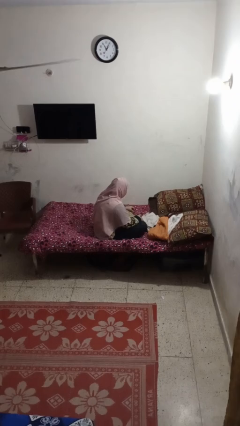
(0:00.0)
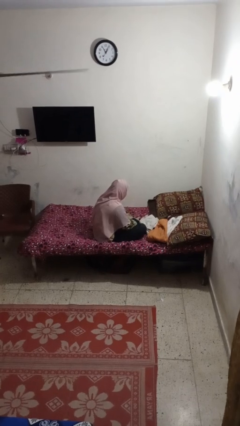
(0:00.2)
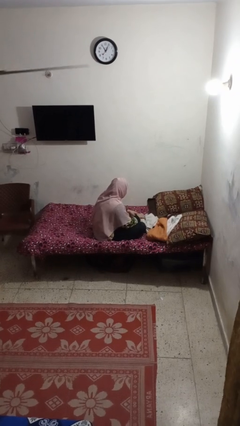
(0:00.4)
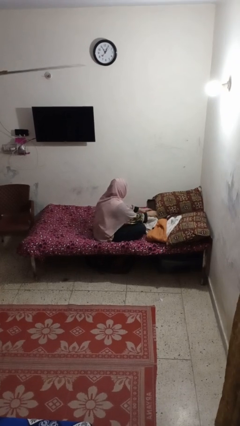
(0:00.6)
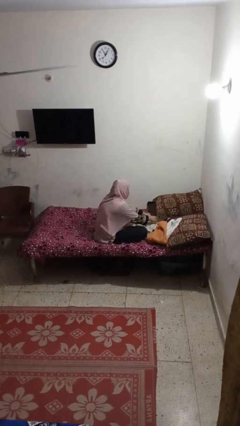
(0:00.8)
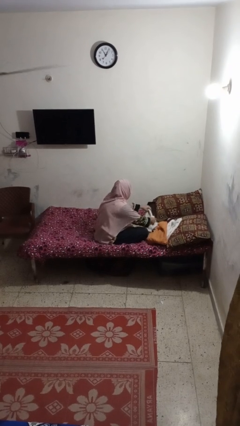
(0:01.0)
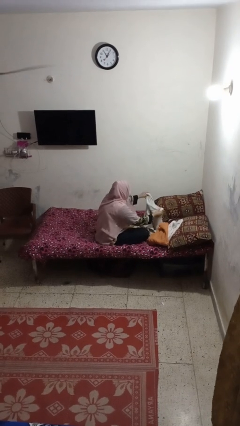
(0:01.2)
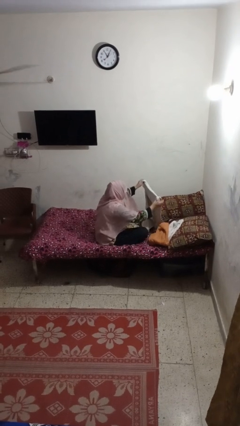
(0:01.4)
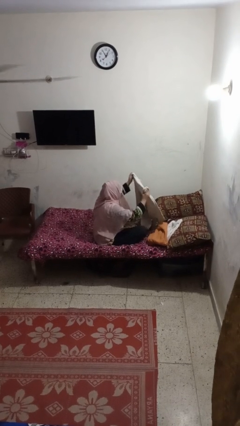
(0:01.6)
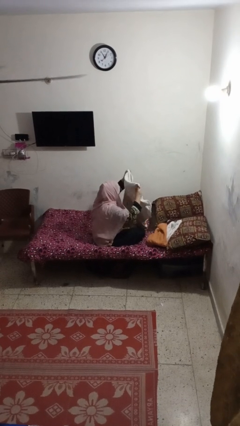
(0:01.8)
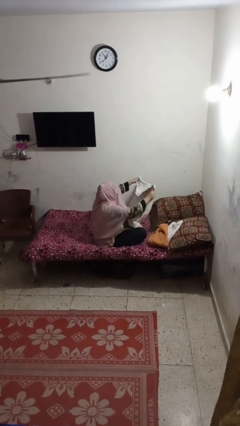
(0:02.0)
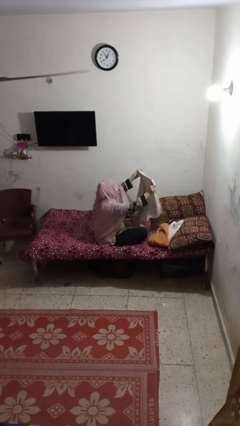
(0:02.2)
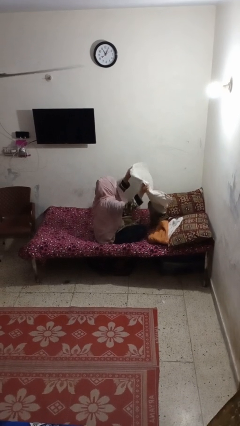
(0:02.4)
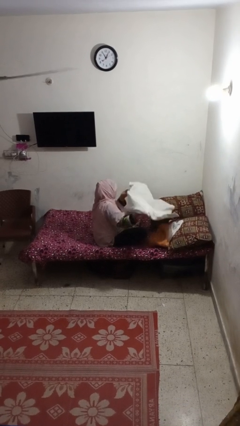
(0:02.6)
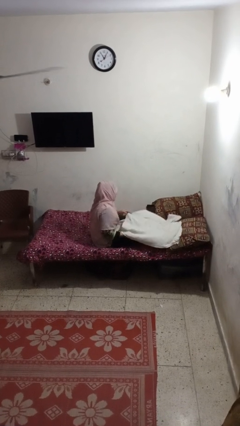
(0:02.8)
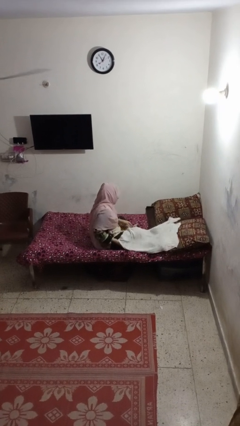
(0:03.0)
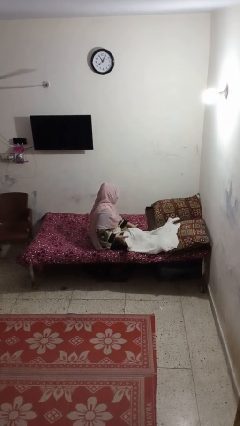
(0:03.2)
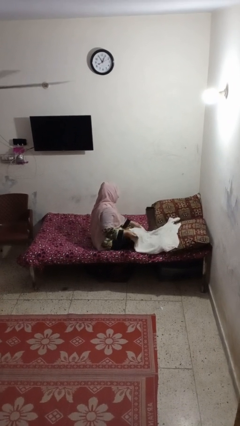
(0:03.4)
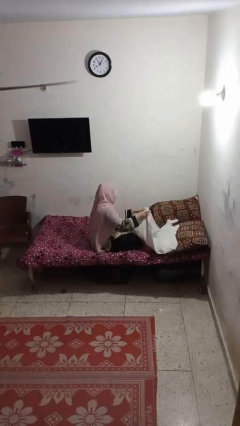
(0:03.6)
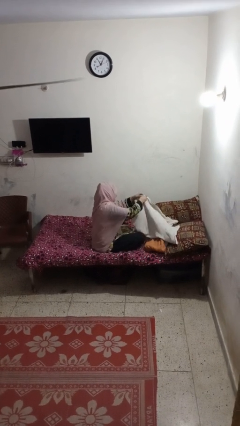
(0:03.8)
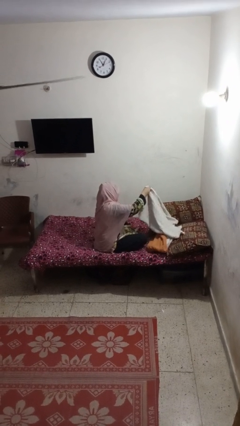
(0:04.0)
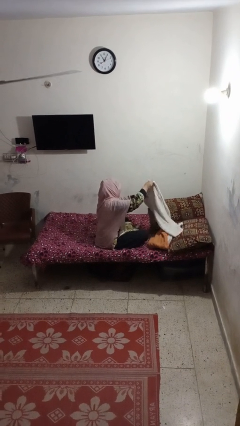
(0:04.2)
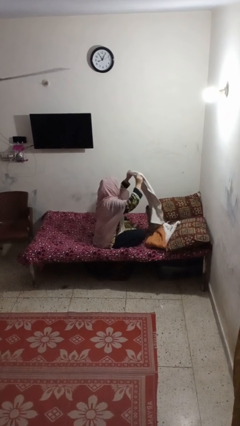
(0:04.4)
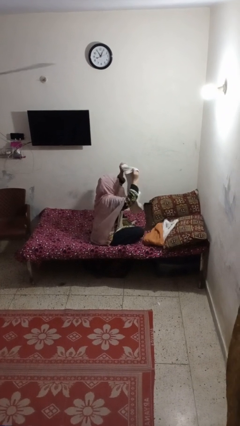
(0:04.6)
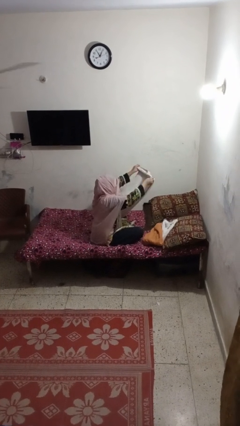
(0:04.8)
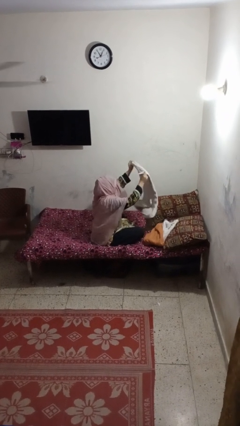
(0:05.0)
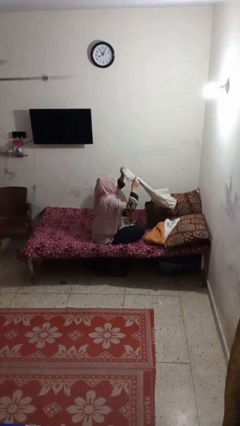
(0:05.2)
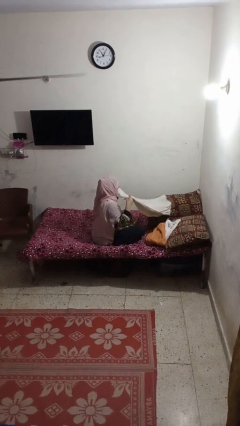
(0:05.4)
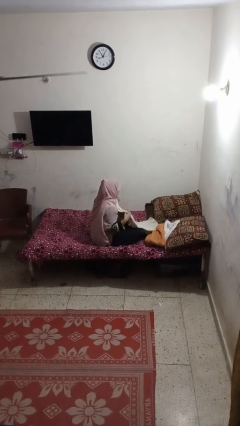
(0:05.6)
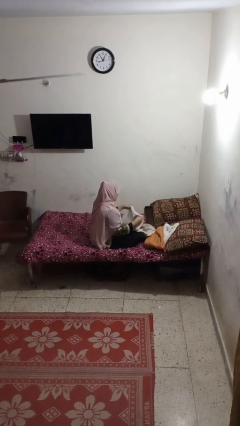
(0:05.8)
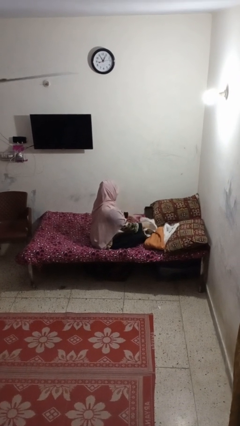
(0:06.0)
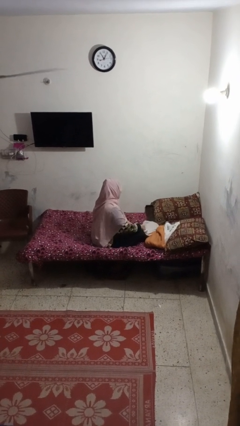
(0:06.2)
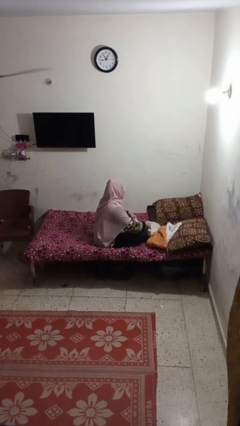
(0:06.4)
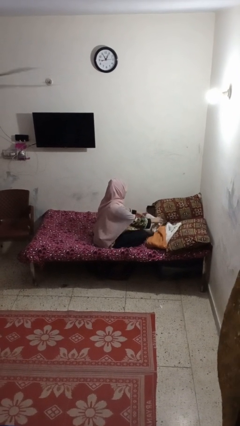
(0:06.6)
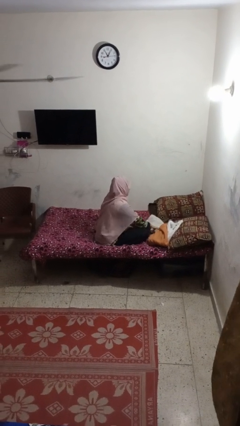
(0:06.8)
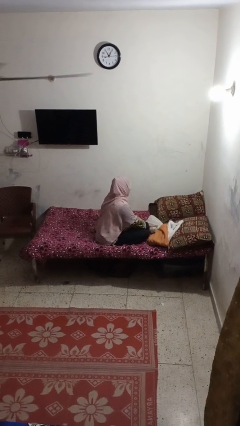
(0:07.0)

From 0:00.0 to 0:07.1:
person folds towel

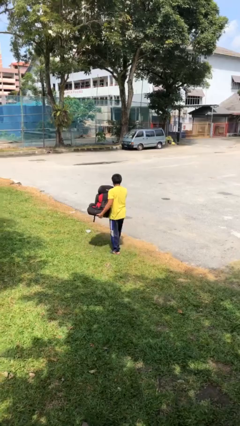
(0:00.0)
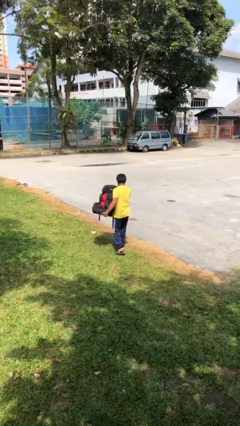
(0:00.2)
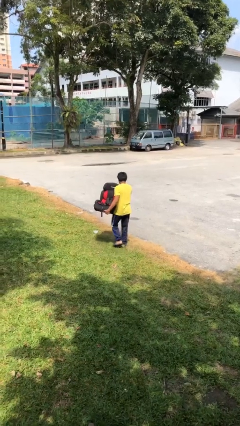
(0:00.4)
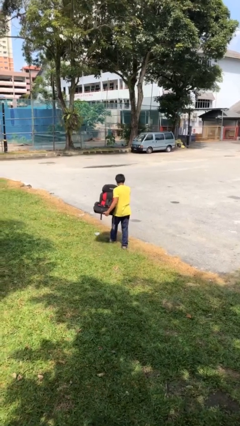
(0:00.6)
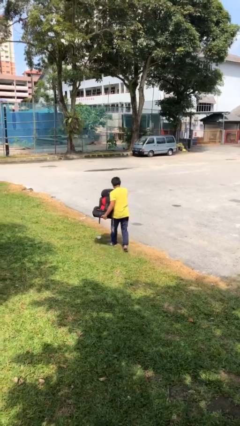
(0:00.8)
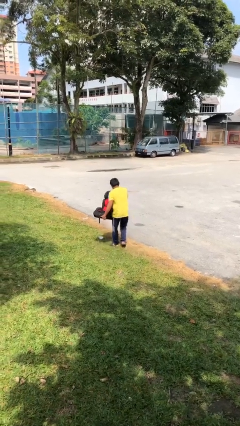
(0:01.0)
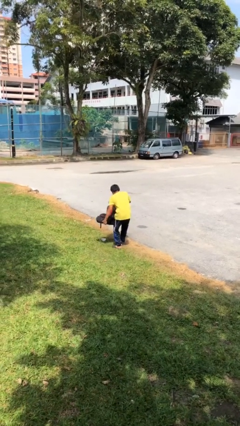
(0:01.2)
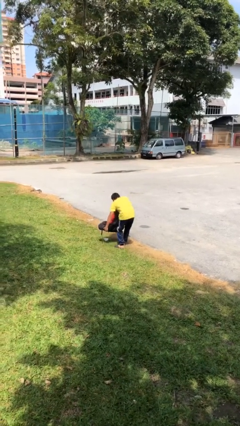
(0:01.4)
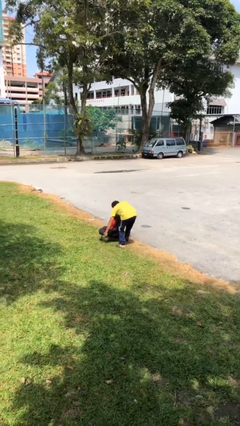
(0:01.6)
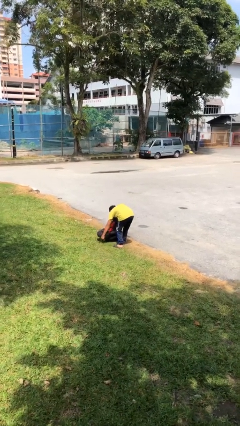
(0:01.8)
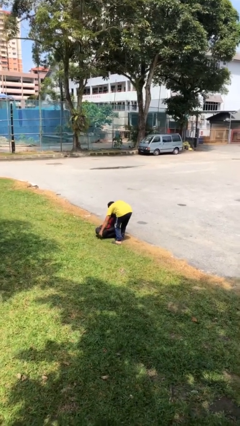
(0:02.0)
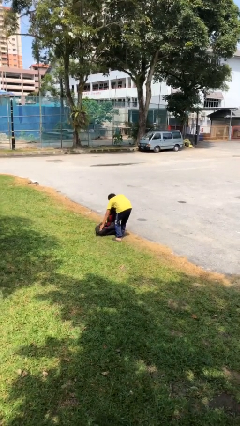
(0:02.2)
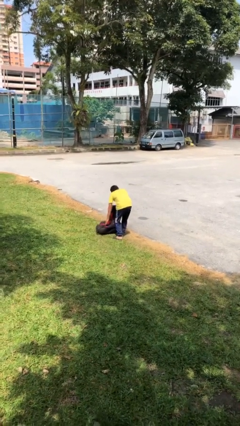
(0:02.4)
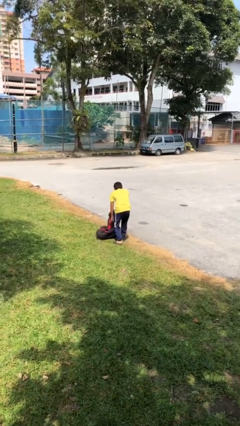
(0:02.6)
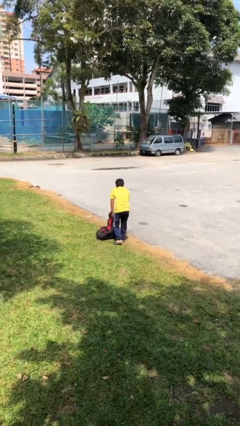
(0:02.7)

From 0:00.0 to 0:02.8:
person puts down object on floor

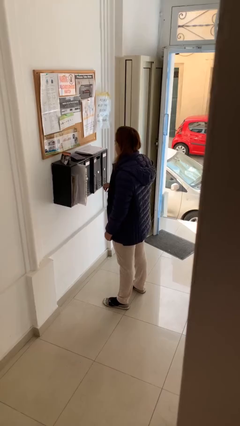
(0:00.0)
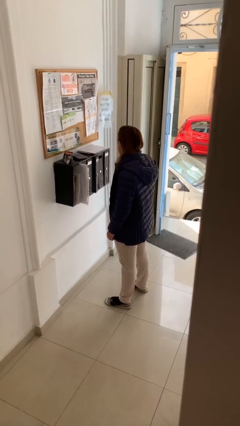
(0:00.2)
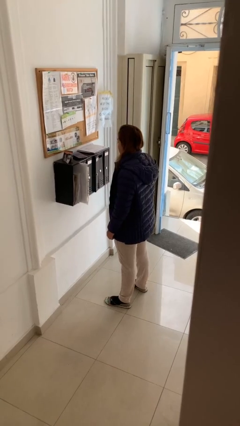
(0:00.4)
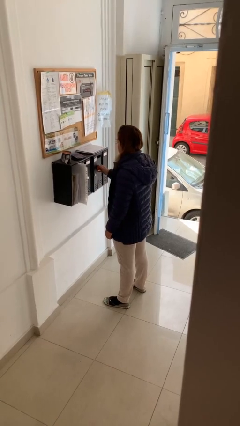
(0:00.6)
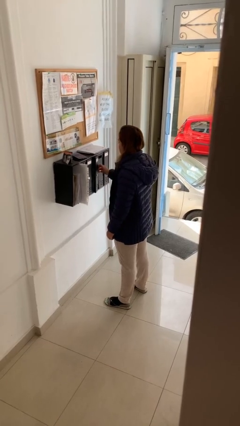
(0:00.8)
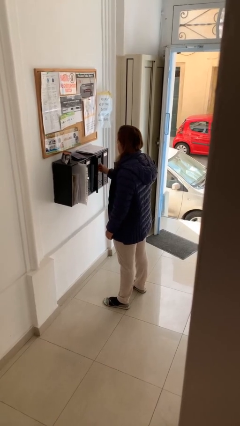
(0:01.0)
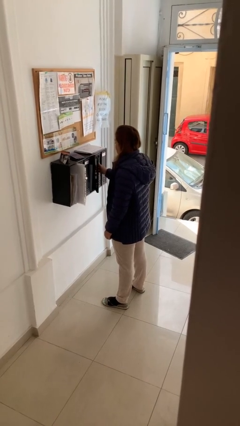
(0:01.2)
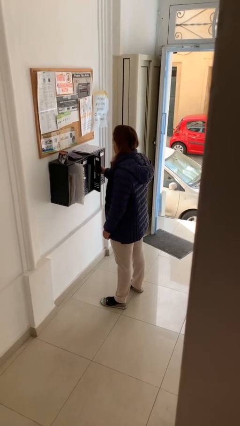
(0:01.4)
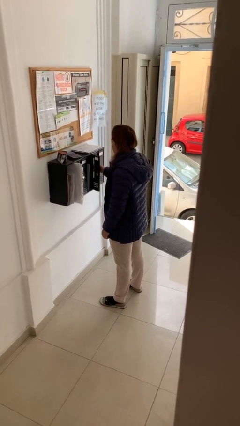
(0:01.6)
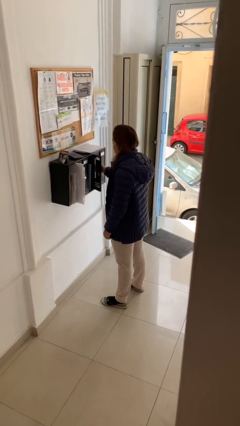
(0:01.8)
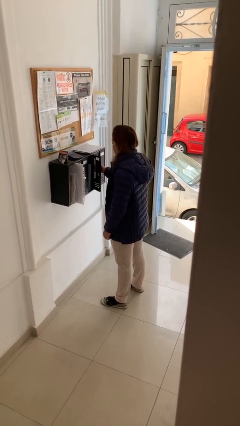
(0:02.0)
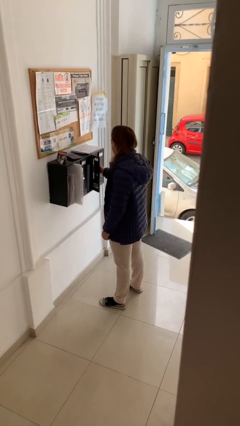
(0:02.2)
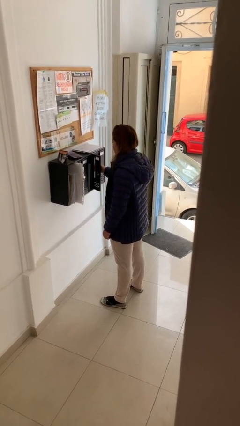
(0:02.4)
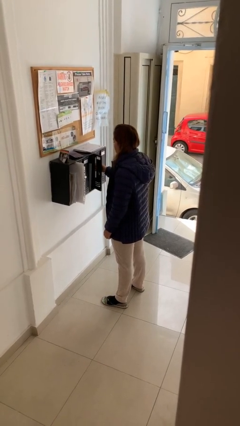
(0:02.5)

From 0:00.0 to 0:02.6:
person opens mailbox

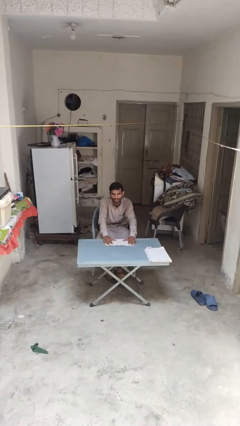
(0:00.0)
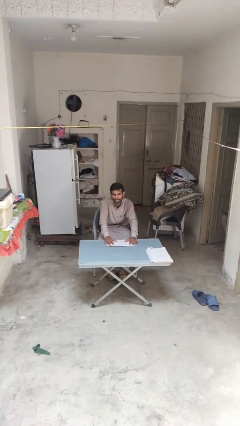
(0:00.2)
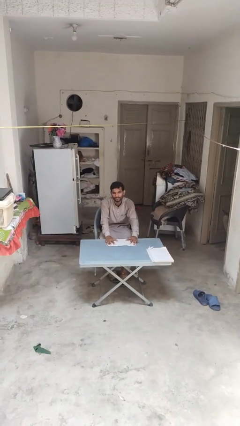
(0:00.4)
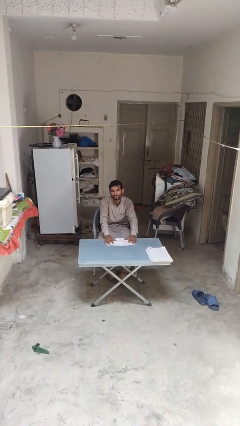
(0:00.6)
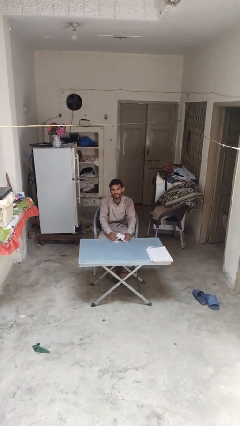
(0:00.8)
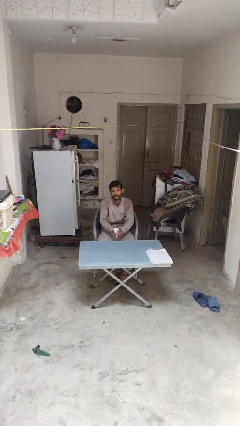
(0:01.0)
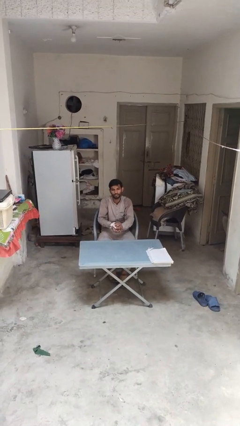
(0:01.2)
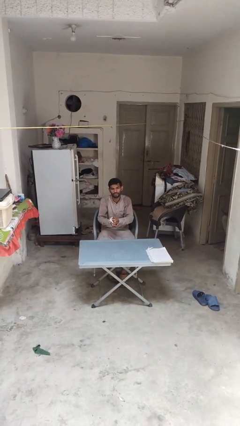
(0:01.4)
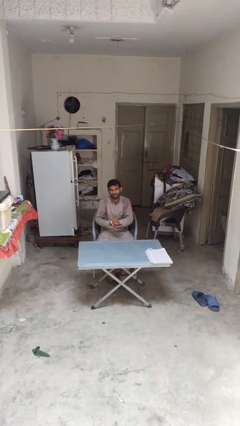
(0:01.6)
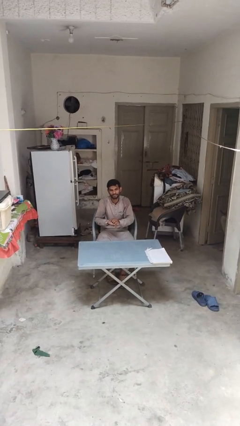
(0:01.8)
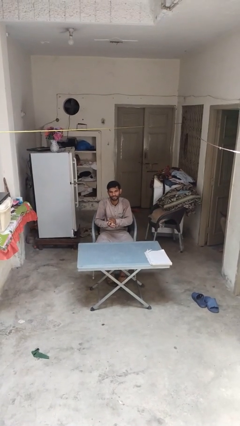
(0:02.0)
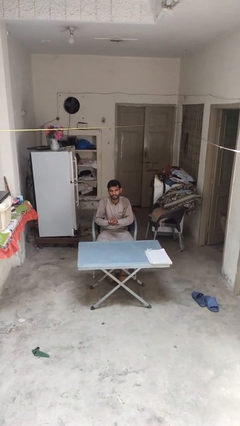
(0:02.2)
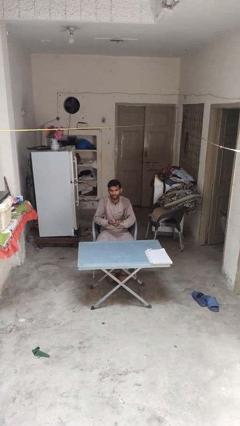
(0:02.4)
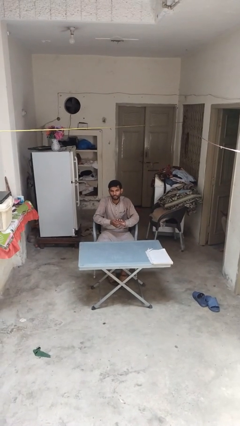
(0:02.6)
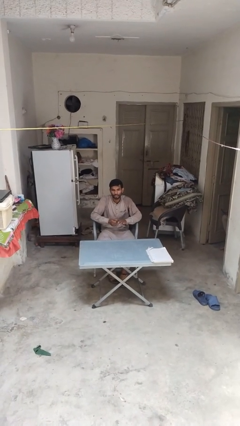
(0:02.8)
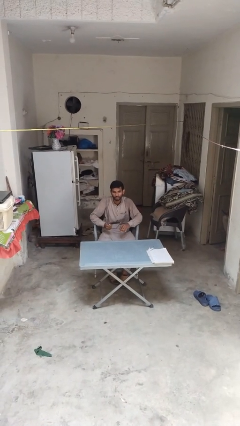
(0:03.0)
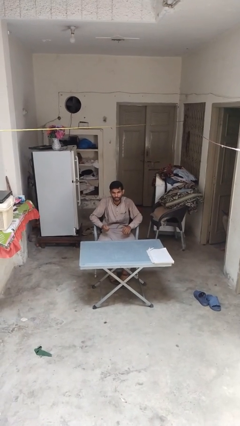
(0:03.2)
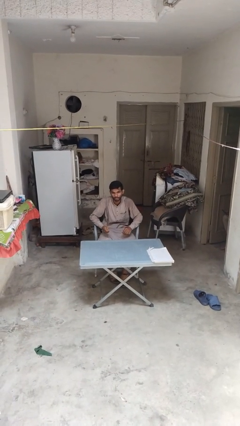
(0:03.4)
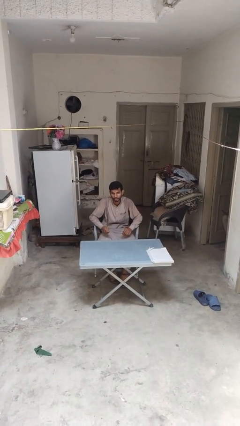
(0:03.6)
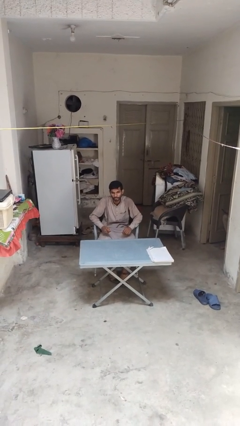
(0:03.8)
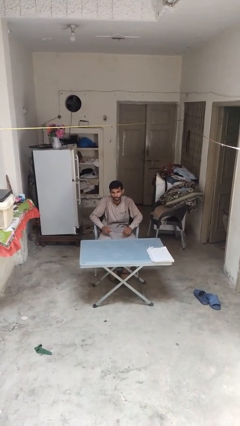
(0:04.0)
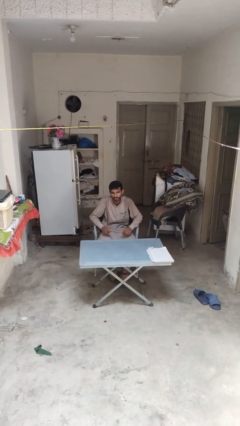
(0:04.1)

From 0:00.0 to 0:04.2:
person crumples paper

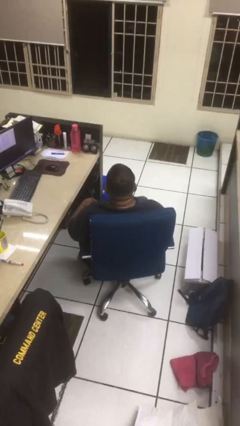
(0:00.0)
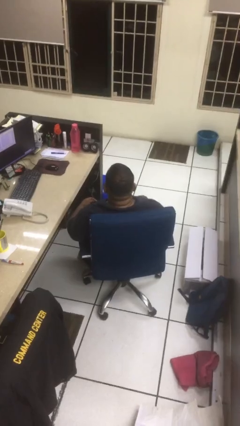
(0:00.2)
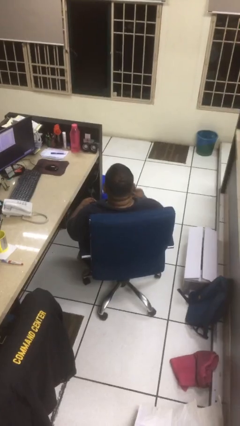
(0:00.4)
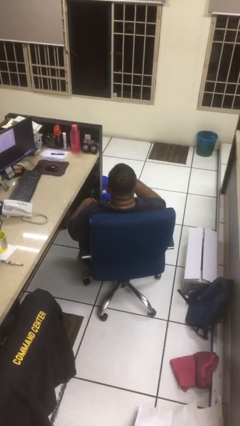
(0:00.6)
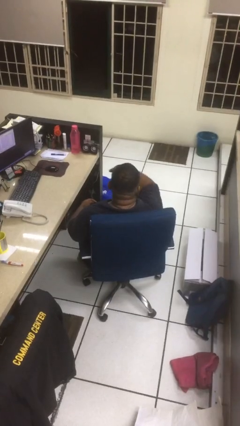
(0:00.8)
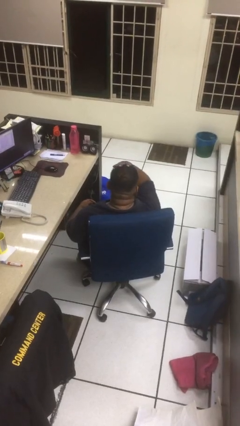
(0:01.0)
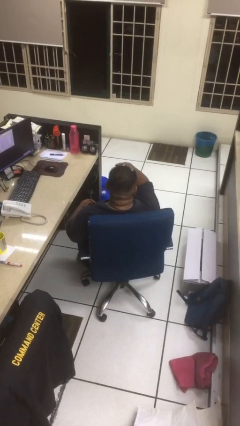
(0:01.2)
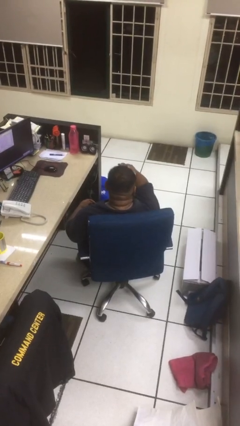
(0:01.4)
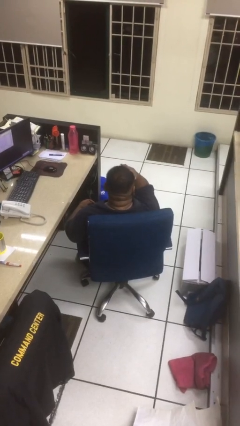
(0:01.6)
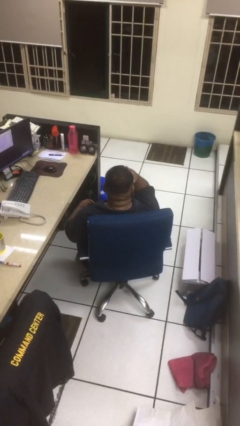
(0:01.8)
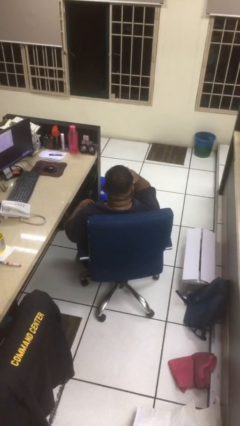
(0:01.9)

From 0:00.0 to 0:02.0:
person strokes hair
